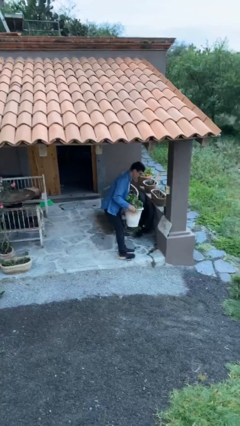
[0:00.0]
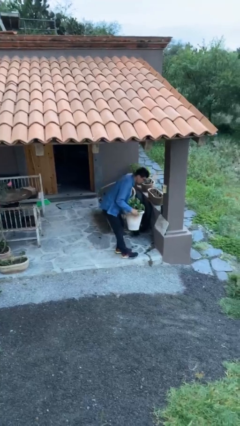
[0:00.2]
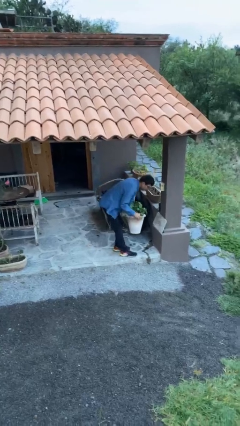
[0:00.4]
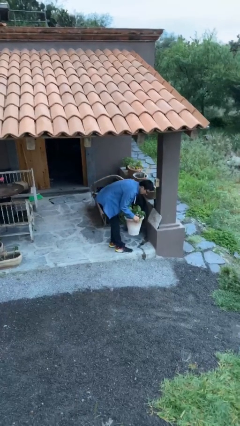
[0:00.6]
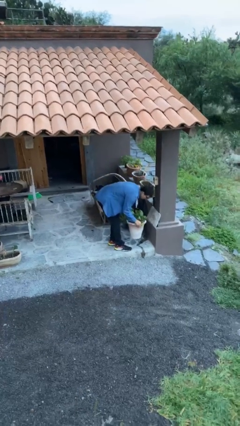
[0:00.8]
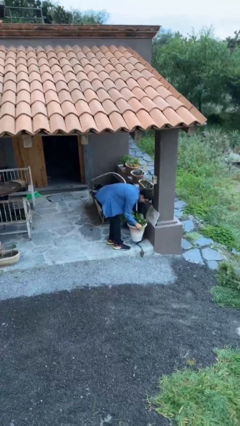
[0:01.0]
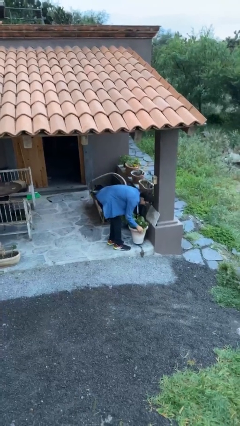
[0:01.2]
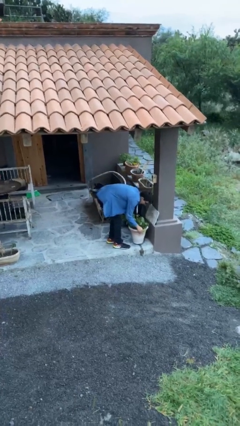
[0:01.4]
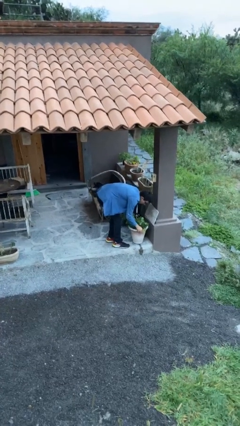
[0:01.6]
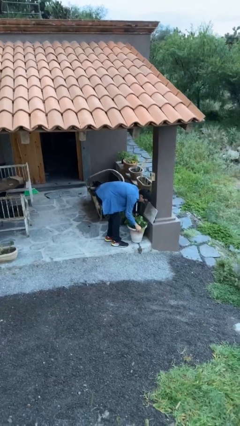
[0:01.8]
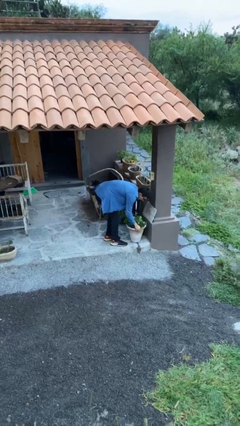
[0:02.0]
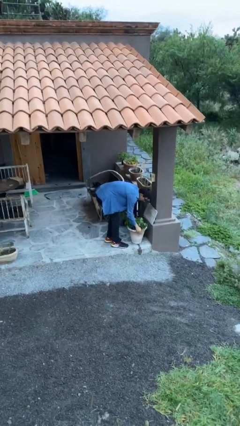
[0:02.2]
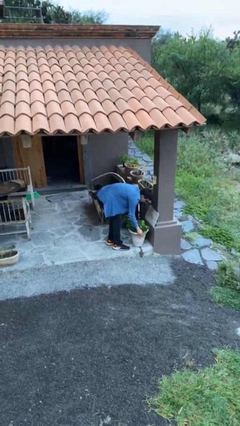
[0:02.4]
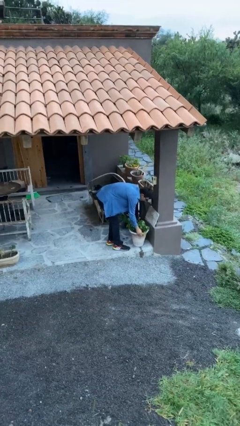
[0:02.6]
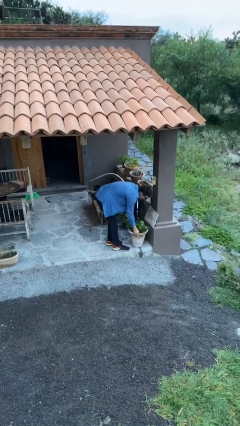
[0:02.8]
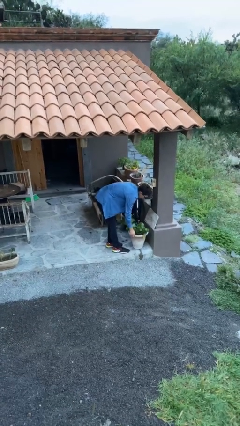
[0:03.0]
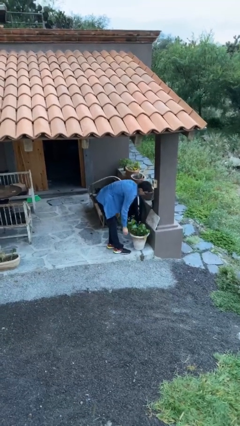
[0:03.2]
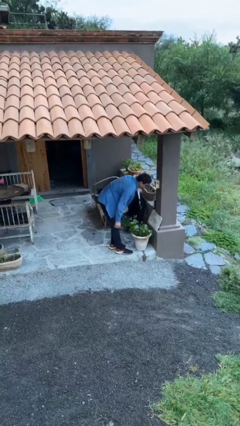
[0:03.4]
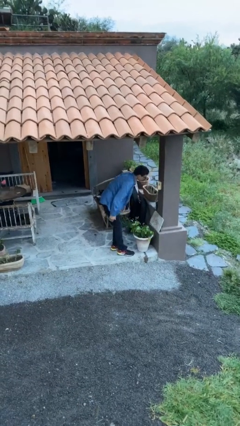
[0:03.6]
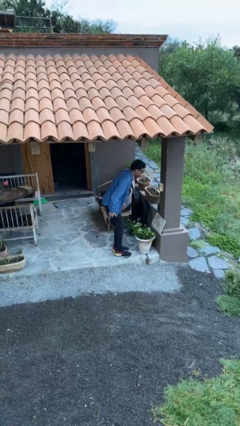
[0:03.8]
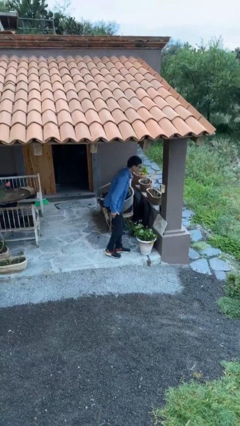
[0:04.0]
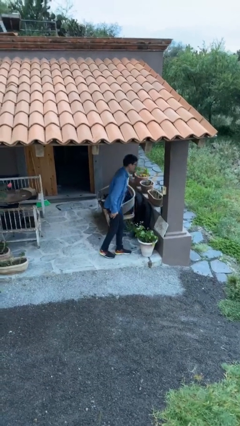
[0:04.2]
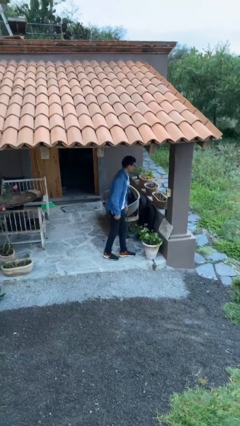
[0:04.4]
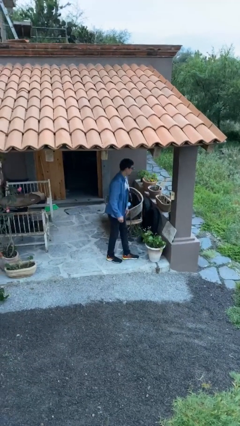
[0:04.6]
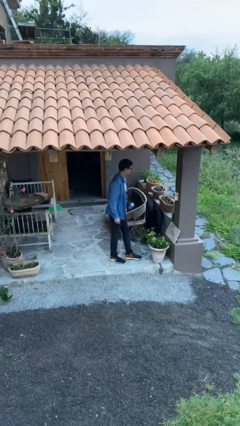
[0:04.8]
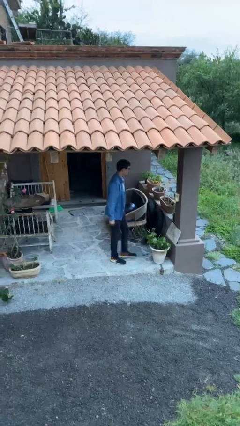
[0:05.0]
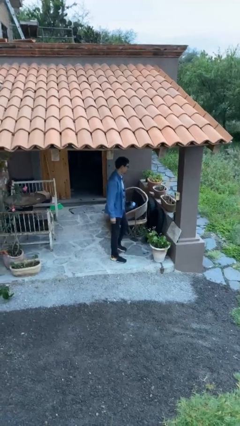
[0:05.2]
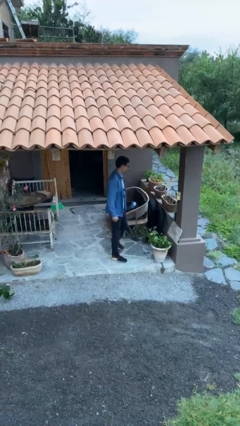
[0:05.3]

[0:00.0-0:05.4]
person puts down object on floor

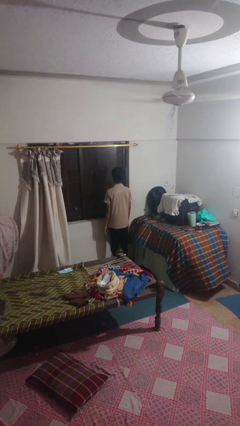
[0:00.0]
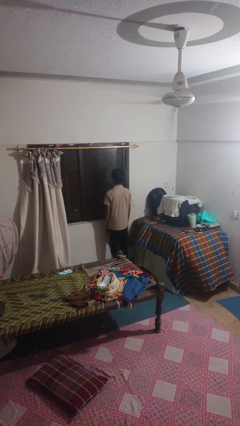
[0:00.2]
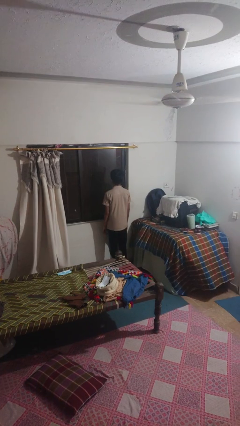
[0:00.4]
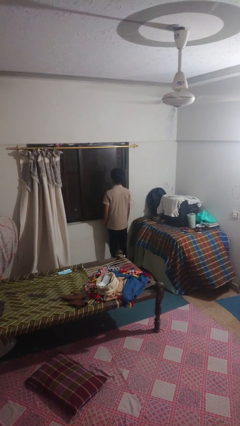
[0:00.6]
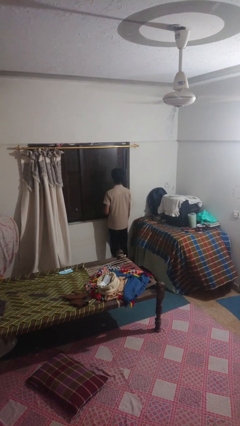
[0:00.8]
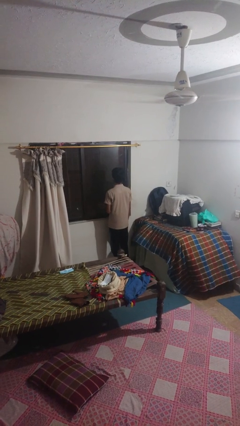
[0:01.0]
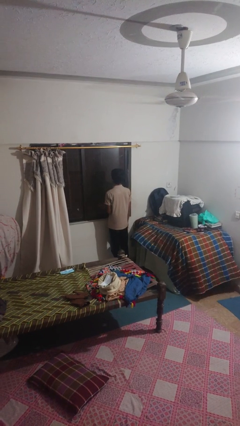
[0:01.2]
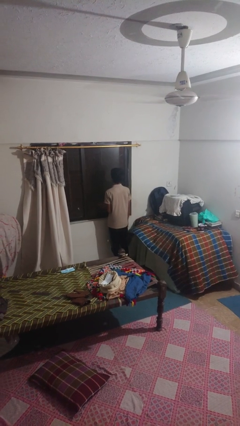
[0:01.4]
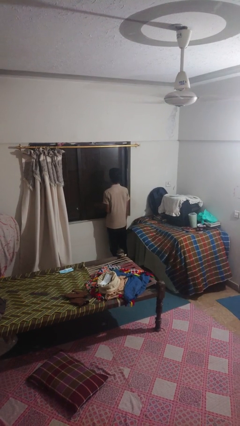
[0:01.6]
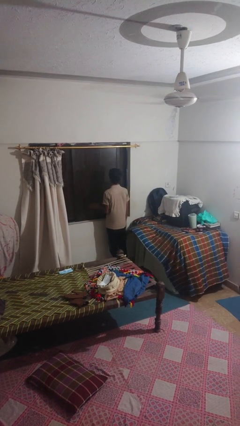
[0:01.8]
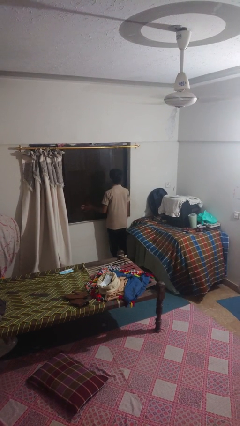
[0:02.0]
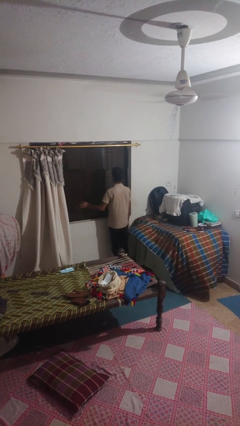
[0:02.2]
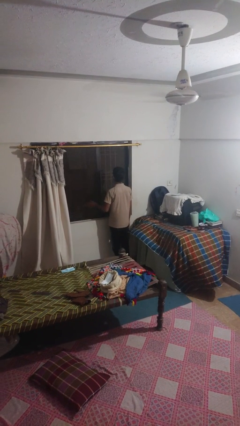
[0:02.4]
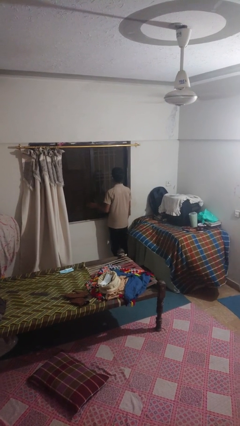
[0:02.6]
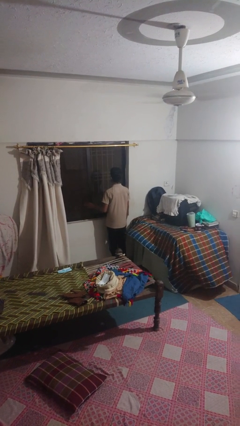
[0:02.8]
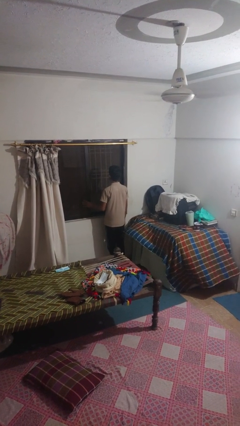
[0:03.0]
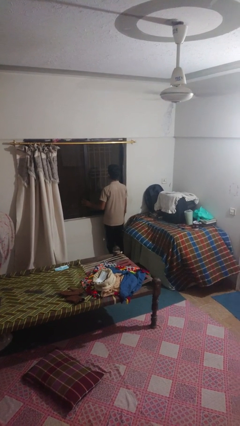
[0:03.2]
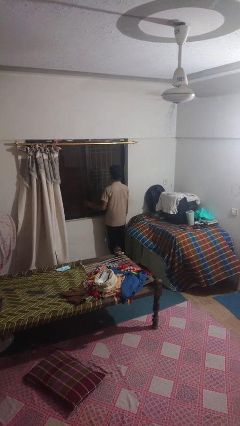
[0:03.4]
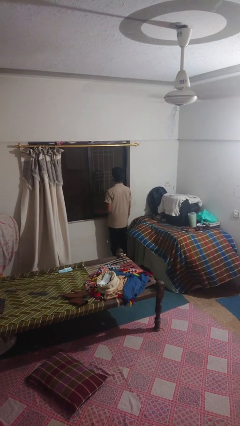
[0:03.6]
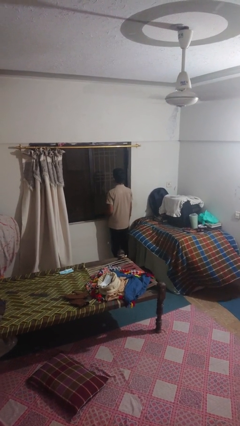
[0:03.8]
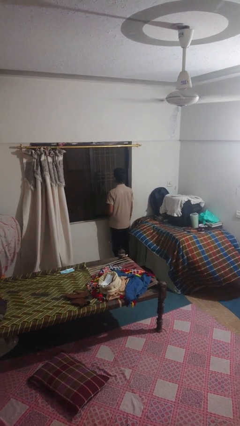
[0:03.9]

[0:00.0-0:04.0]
person opens sliding door

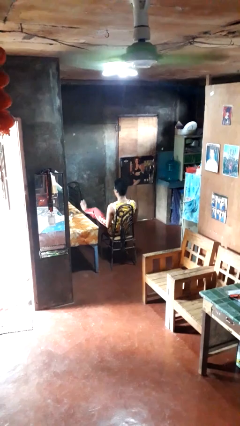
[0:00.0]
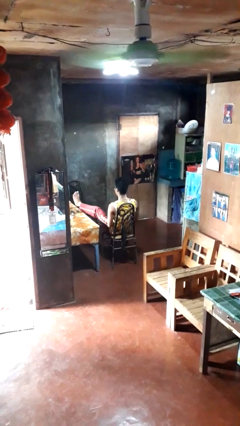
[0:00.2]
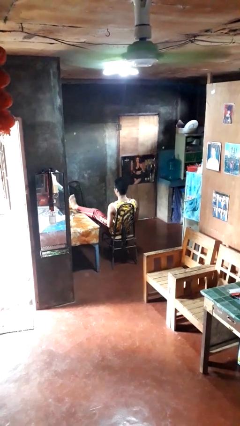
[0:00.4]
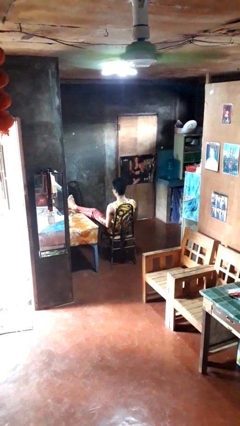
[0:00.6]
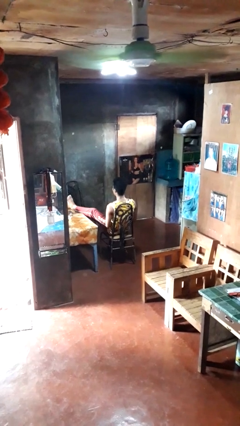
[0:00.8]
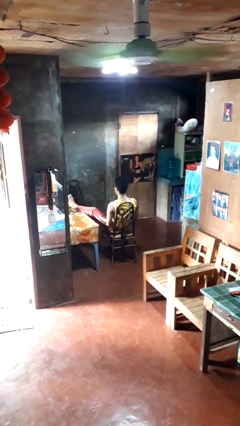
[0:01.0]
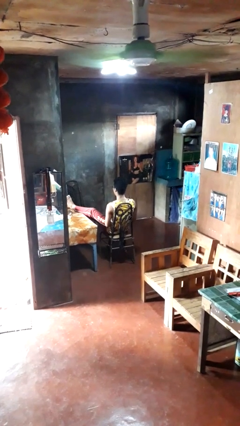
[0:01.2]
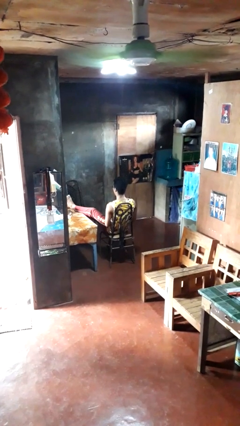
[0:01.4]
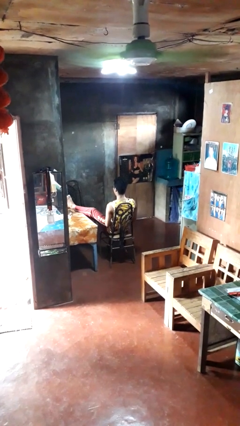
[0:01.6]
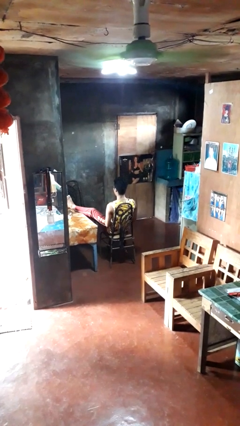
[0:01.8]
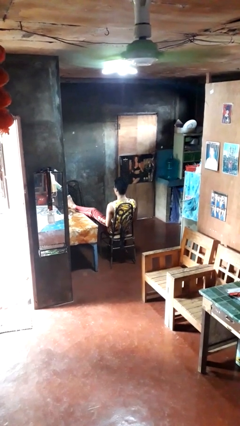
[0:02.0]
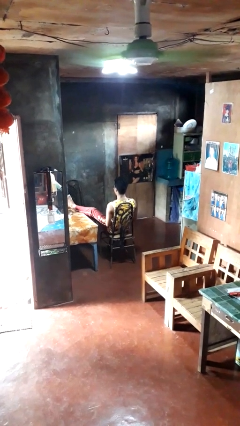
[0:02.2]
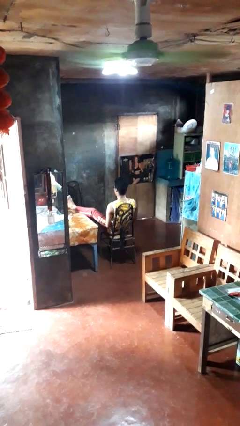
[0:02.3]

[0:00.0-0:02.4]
person puts feet up

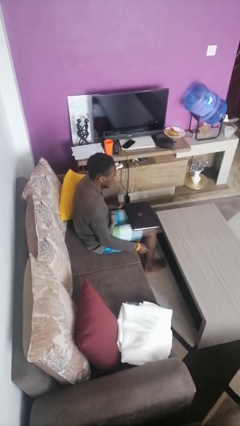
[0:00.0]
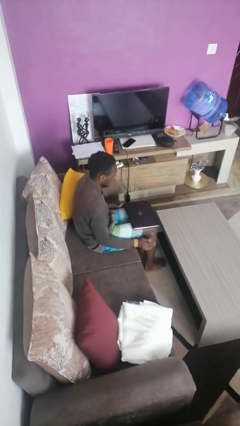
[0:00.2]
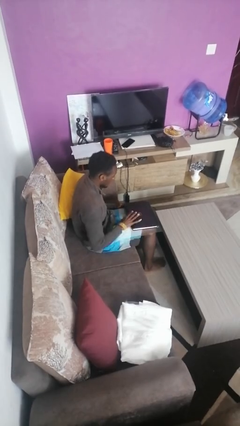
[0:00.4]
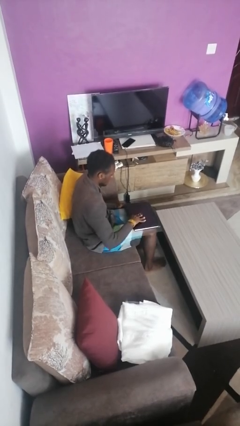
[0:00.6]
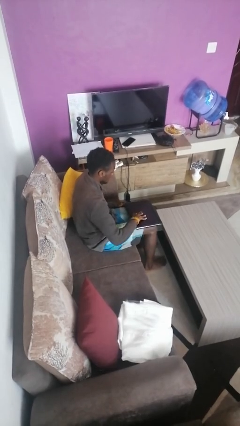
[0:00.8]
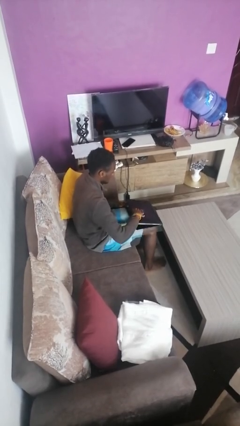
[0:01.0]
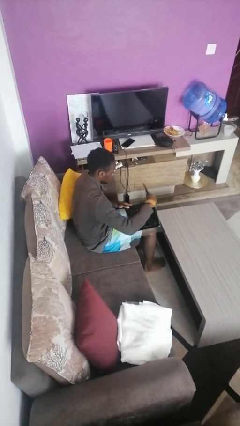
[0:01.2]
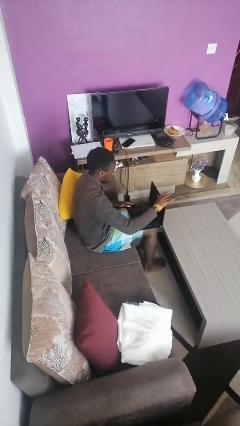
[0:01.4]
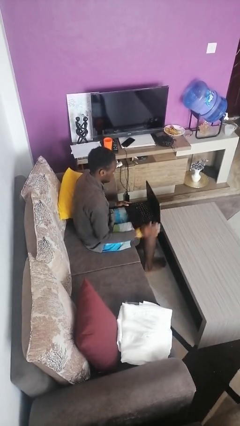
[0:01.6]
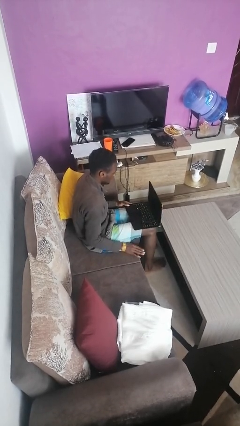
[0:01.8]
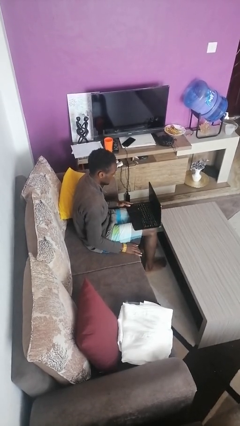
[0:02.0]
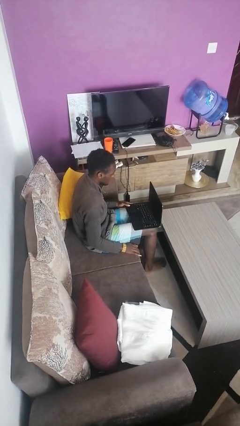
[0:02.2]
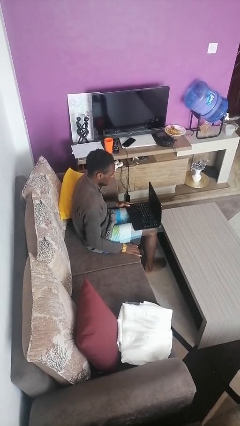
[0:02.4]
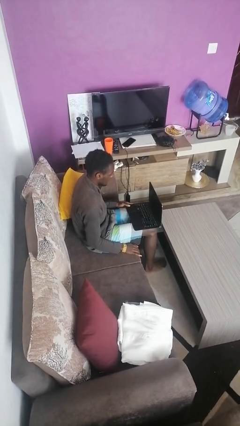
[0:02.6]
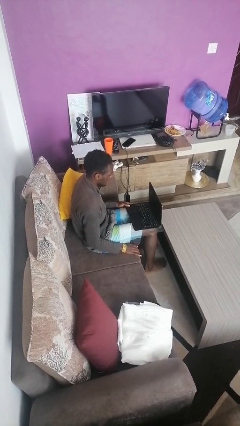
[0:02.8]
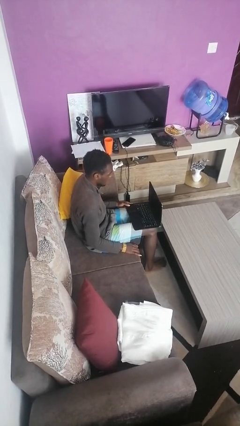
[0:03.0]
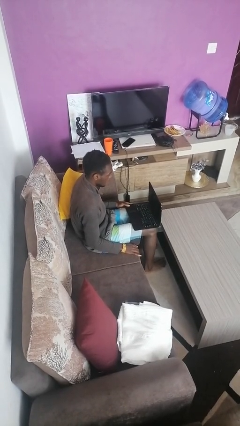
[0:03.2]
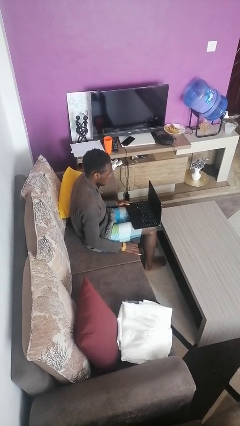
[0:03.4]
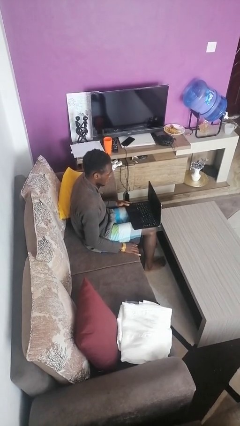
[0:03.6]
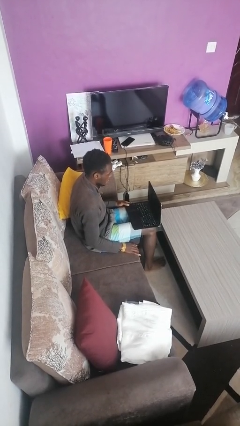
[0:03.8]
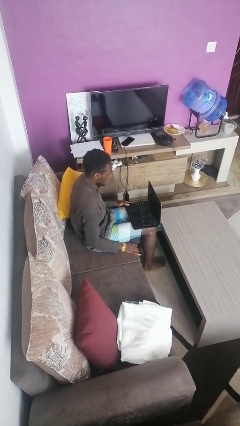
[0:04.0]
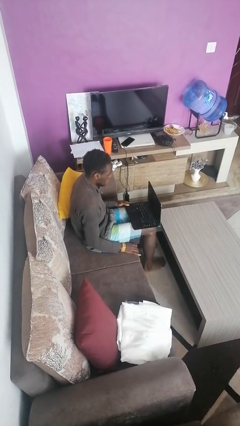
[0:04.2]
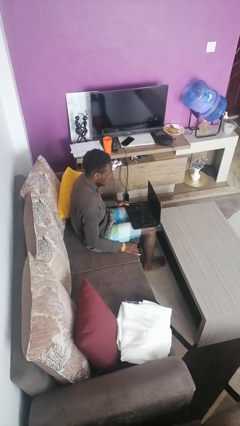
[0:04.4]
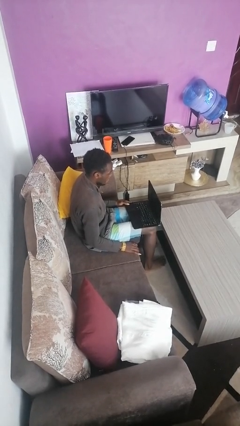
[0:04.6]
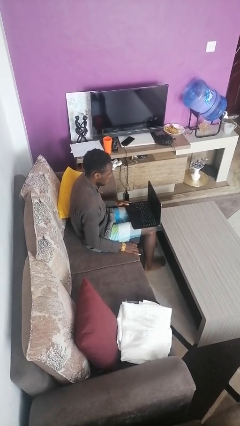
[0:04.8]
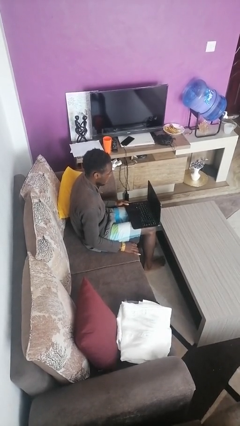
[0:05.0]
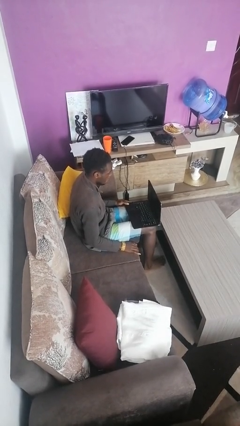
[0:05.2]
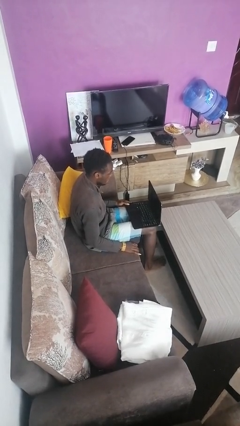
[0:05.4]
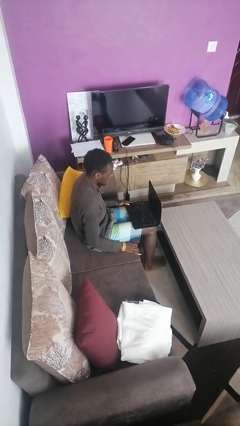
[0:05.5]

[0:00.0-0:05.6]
person opens laptop

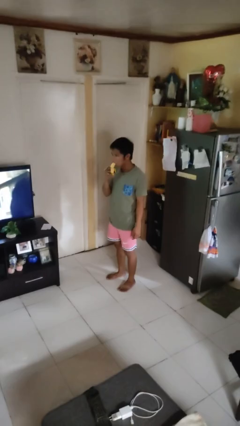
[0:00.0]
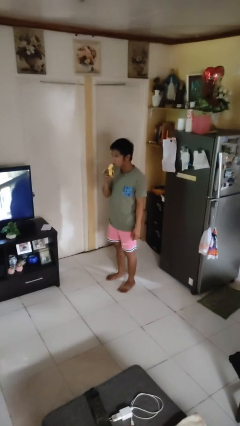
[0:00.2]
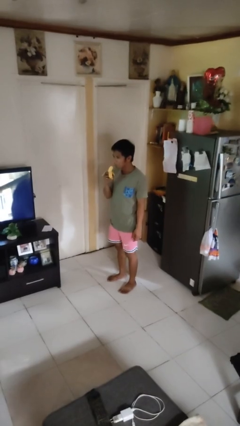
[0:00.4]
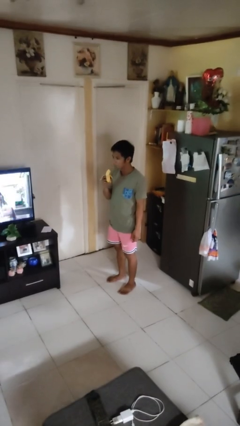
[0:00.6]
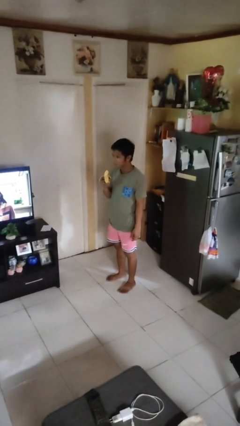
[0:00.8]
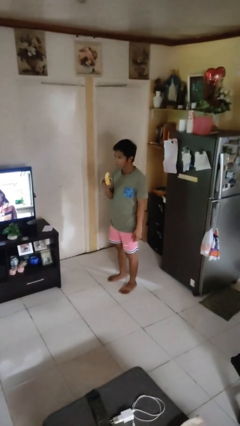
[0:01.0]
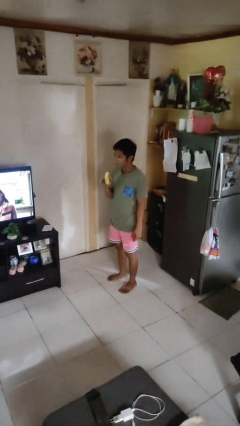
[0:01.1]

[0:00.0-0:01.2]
person eats banana
